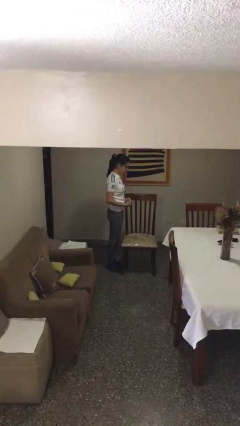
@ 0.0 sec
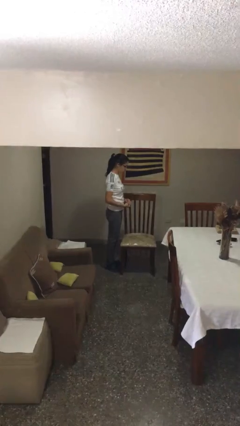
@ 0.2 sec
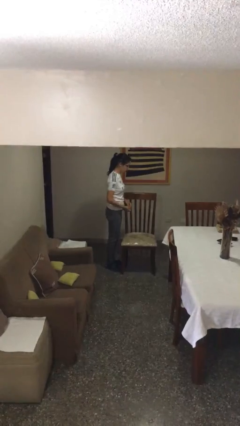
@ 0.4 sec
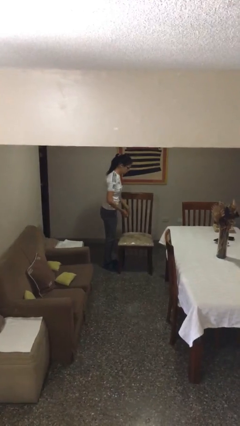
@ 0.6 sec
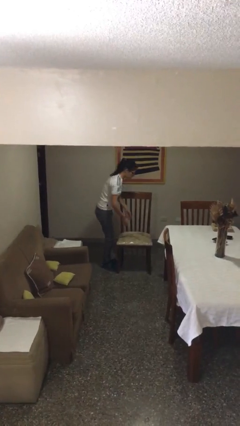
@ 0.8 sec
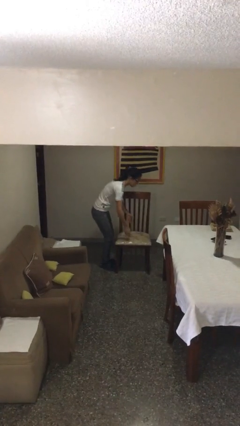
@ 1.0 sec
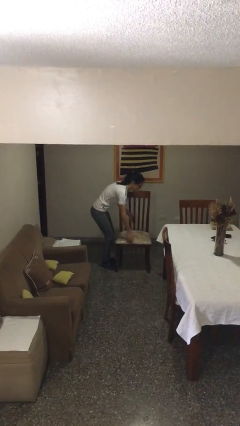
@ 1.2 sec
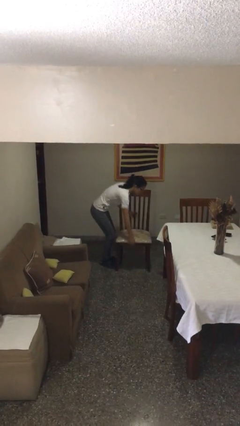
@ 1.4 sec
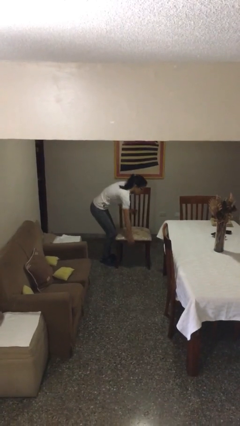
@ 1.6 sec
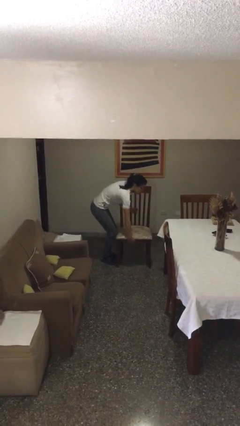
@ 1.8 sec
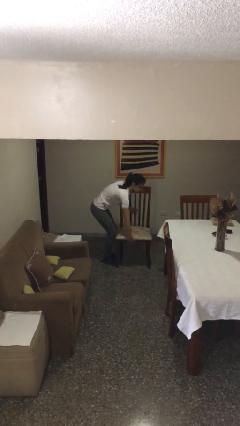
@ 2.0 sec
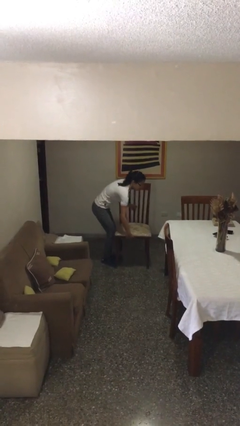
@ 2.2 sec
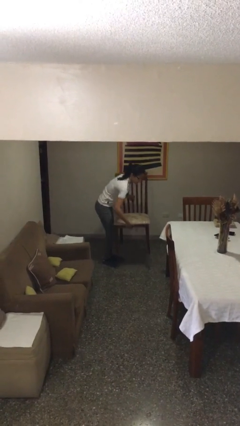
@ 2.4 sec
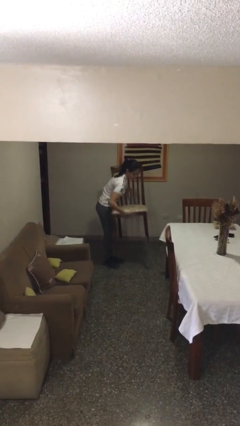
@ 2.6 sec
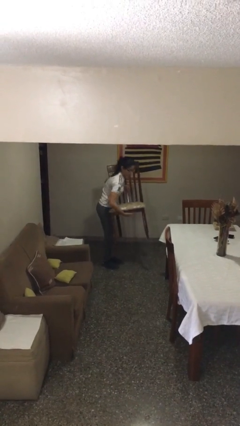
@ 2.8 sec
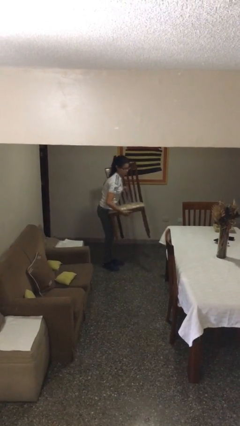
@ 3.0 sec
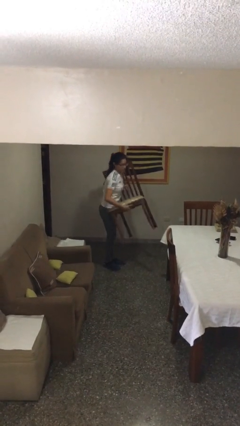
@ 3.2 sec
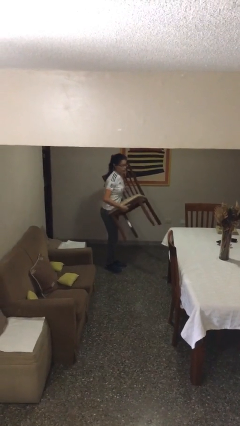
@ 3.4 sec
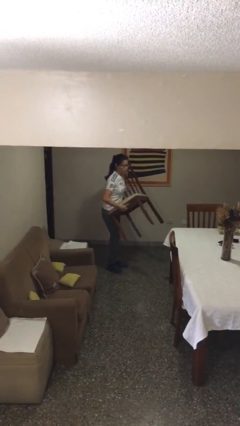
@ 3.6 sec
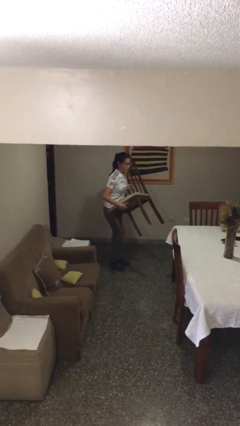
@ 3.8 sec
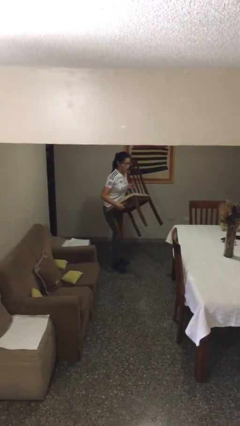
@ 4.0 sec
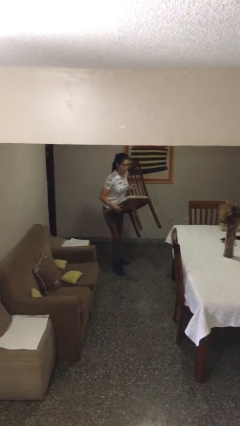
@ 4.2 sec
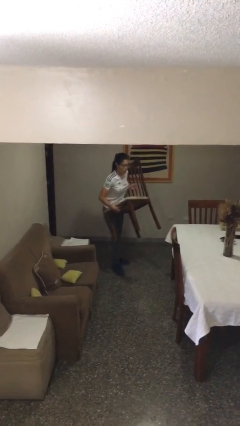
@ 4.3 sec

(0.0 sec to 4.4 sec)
person picks up object from floor

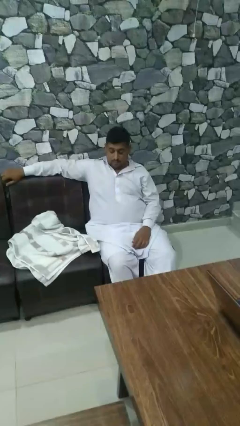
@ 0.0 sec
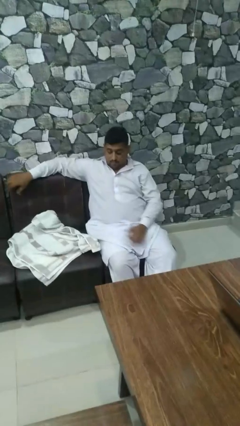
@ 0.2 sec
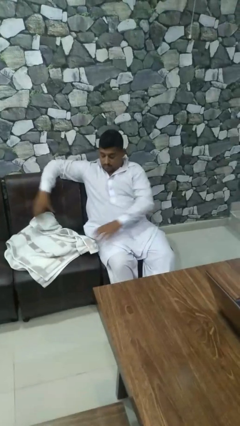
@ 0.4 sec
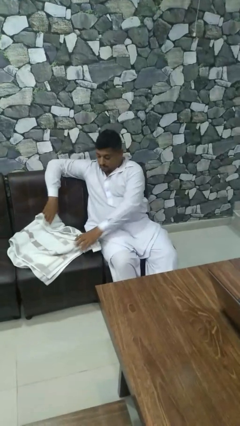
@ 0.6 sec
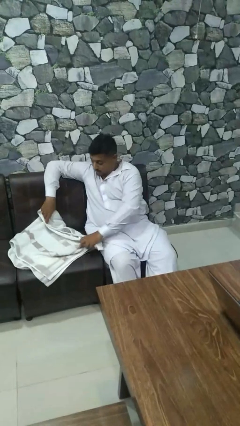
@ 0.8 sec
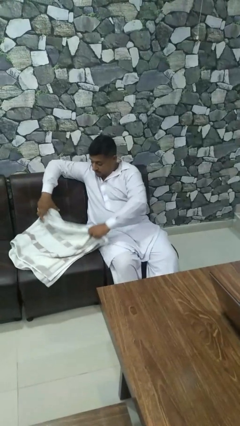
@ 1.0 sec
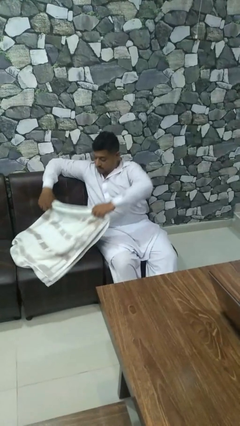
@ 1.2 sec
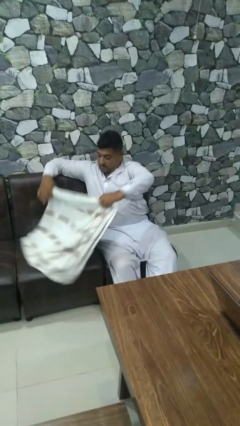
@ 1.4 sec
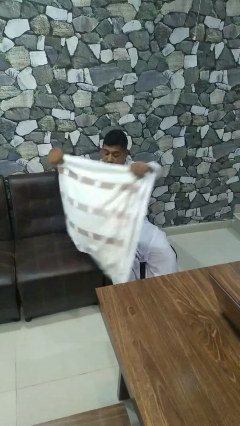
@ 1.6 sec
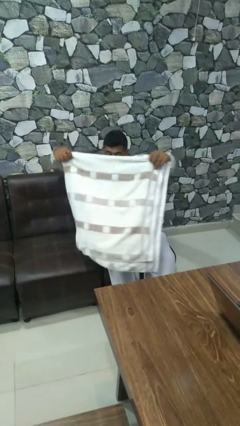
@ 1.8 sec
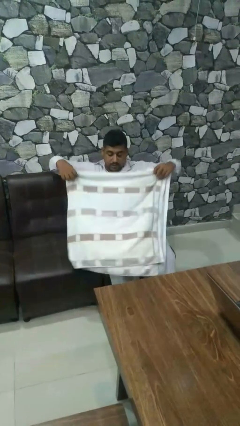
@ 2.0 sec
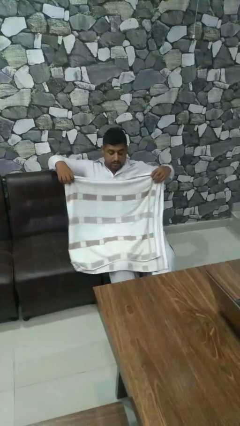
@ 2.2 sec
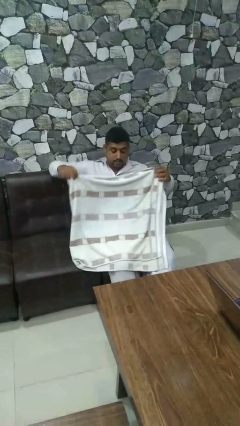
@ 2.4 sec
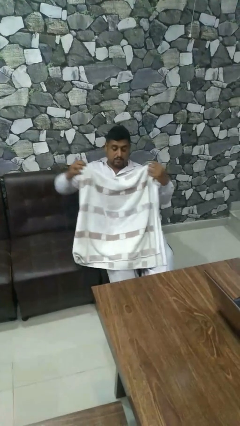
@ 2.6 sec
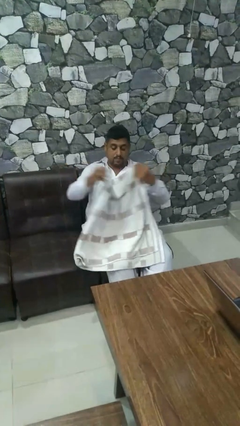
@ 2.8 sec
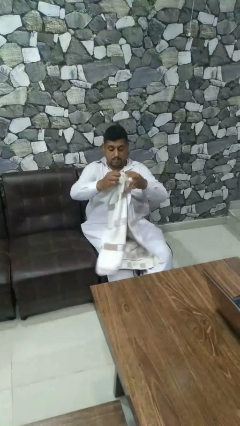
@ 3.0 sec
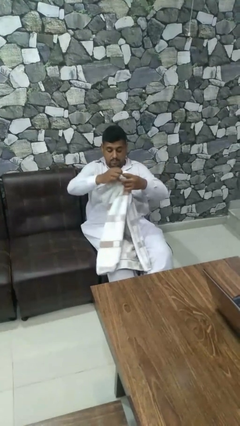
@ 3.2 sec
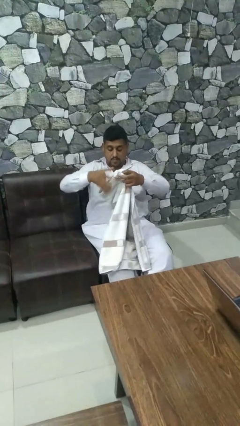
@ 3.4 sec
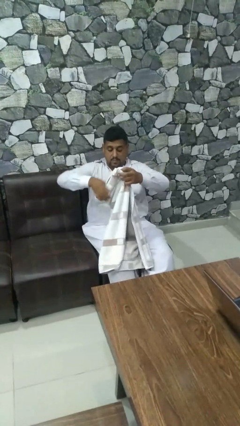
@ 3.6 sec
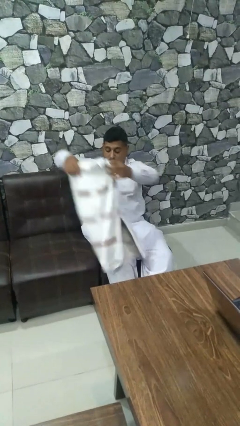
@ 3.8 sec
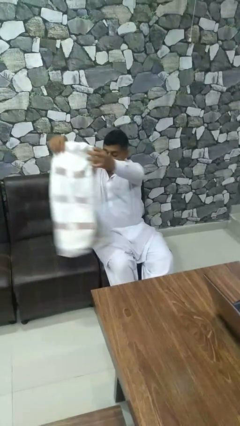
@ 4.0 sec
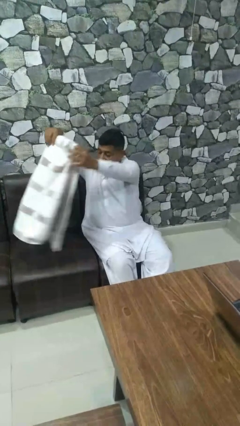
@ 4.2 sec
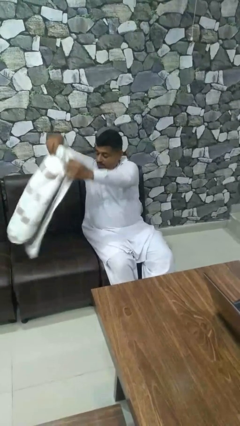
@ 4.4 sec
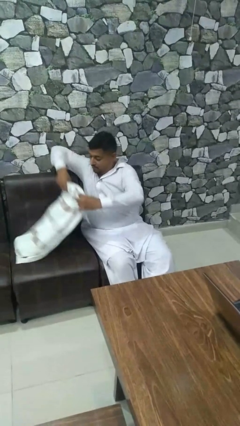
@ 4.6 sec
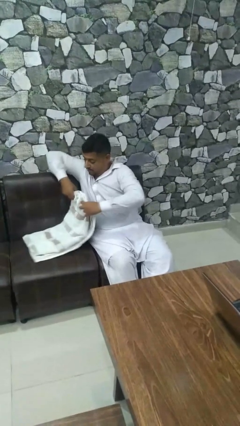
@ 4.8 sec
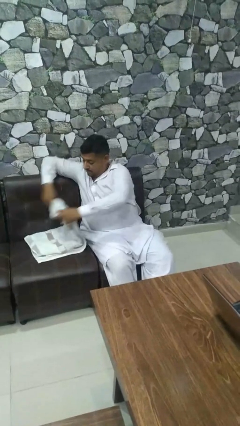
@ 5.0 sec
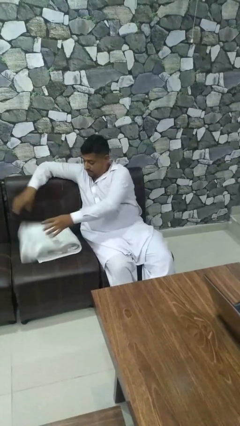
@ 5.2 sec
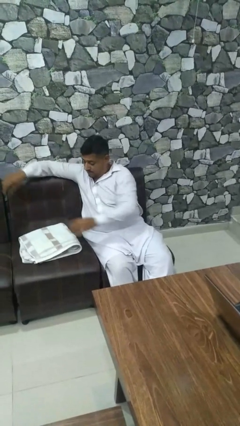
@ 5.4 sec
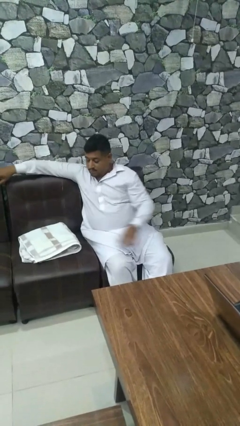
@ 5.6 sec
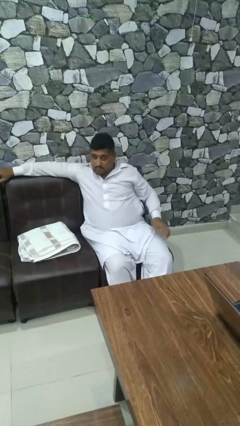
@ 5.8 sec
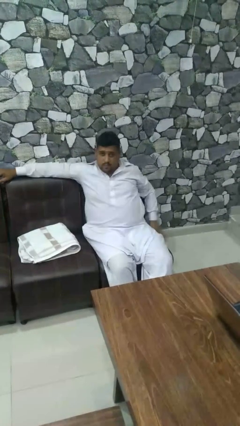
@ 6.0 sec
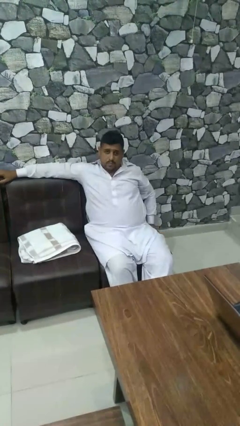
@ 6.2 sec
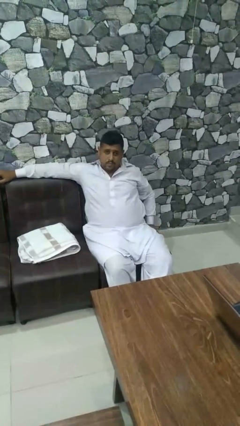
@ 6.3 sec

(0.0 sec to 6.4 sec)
person folds towel

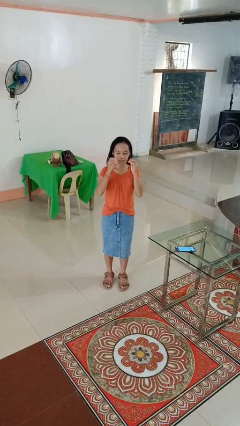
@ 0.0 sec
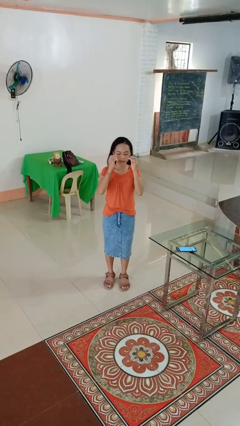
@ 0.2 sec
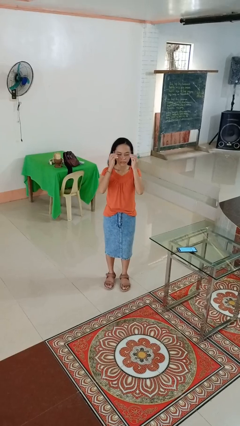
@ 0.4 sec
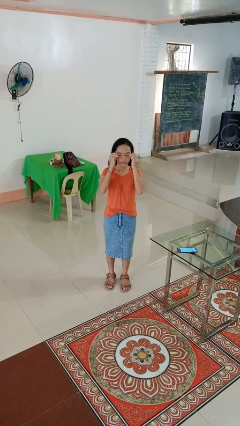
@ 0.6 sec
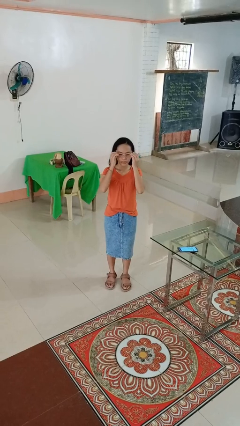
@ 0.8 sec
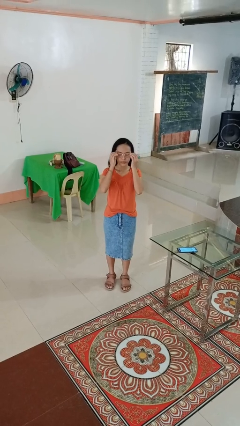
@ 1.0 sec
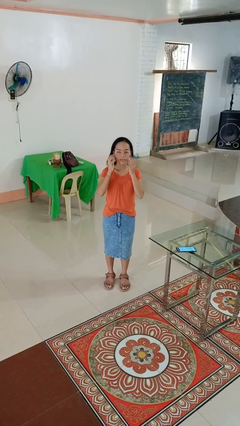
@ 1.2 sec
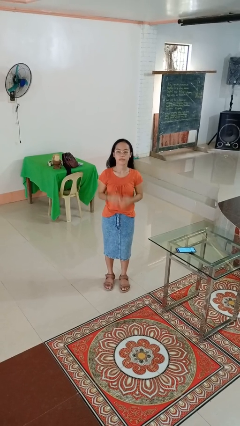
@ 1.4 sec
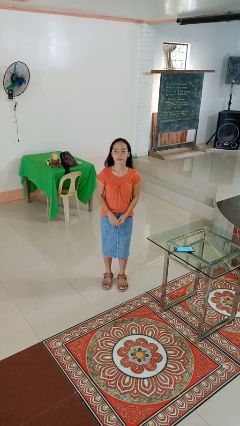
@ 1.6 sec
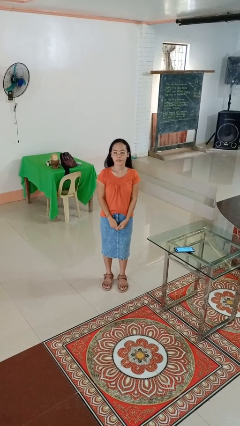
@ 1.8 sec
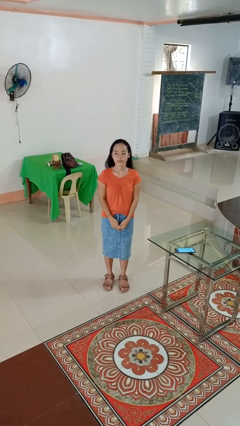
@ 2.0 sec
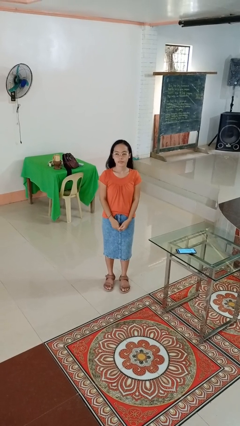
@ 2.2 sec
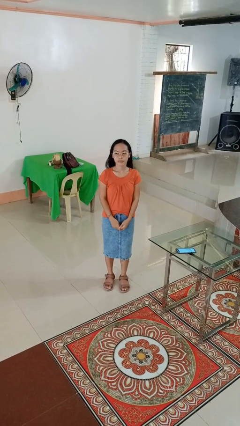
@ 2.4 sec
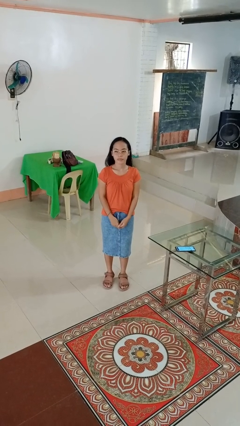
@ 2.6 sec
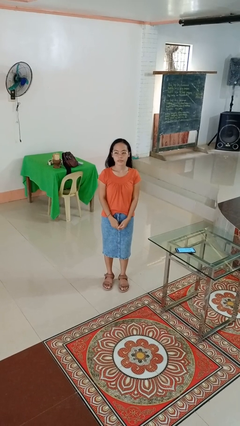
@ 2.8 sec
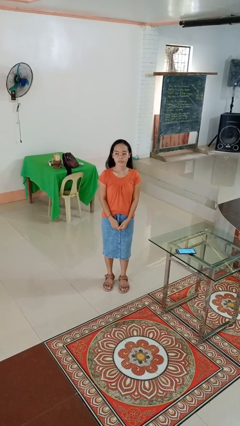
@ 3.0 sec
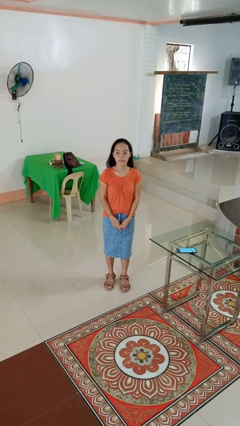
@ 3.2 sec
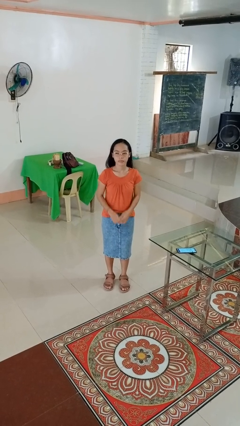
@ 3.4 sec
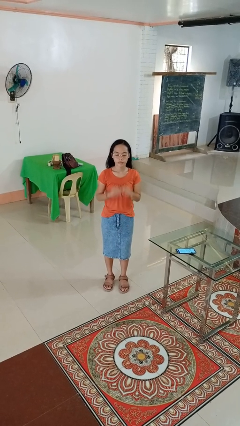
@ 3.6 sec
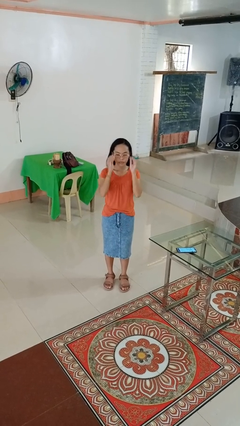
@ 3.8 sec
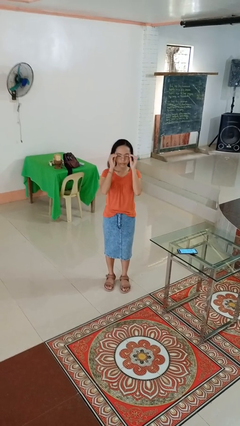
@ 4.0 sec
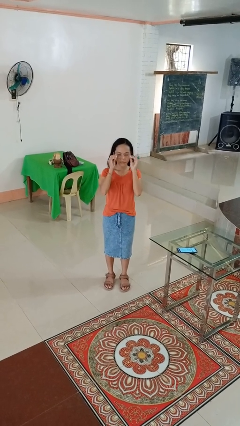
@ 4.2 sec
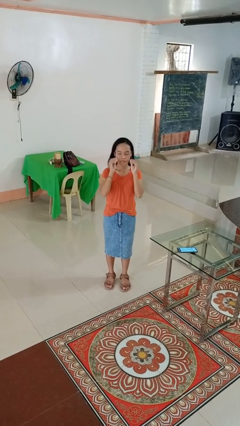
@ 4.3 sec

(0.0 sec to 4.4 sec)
person puts on glasses

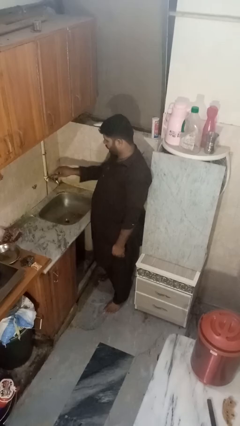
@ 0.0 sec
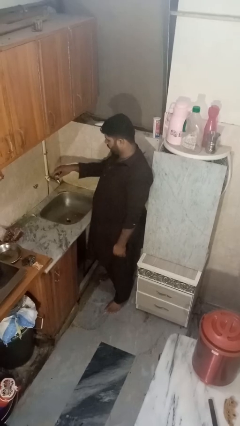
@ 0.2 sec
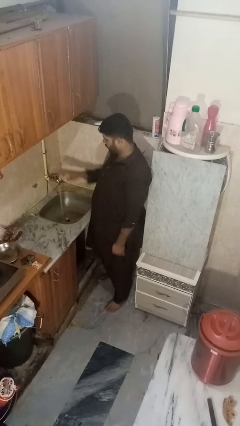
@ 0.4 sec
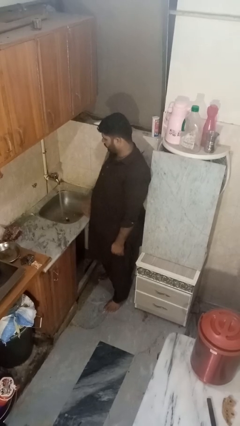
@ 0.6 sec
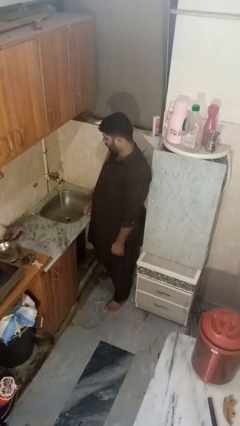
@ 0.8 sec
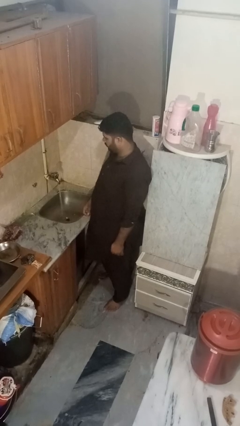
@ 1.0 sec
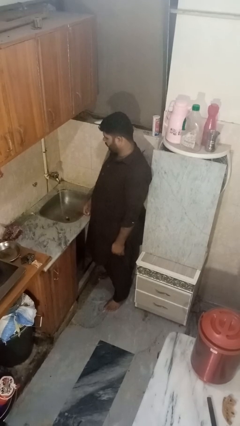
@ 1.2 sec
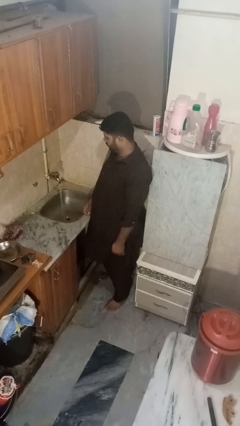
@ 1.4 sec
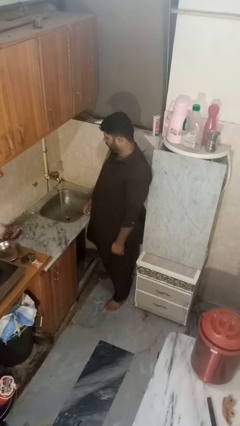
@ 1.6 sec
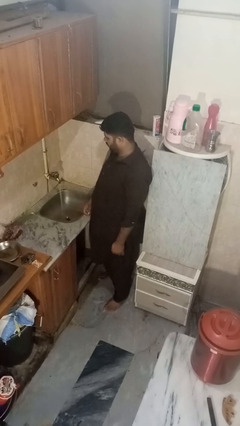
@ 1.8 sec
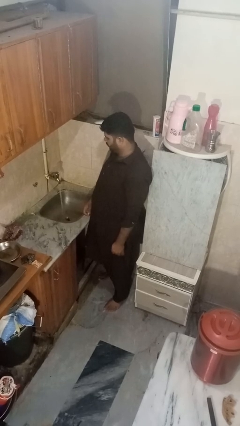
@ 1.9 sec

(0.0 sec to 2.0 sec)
person turns on faucet
